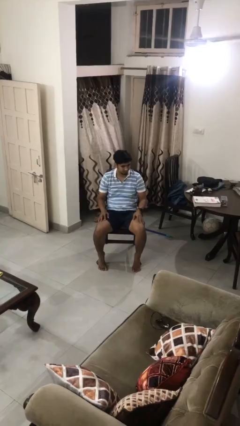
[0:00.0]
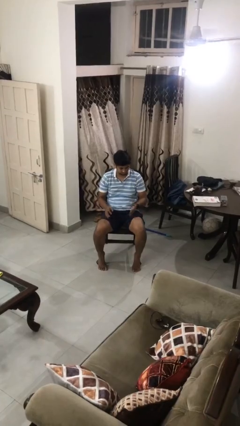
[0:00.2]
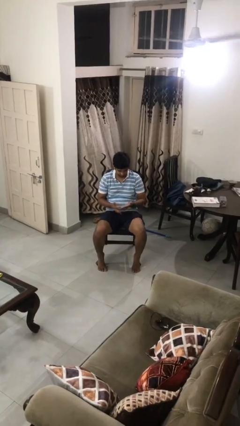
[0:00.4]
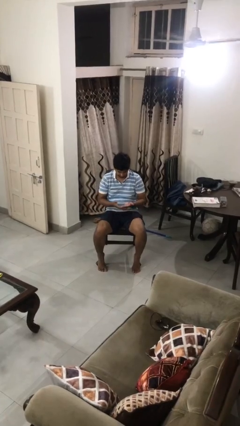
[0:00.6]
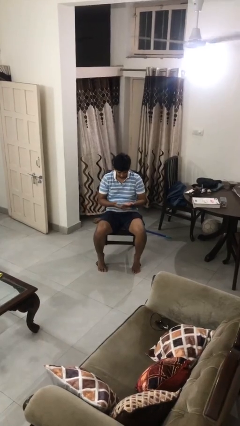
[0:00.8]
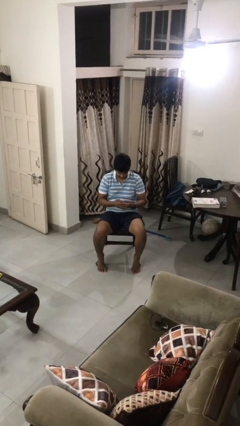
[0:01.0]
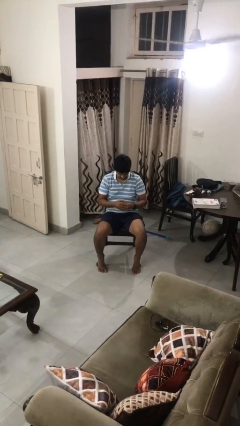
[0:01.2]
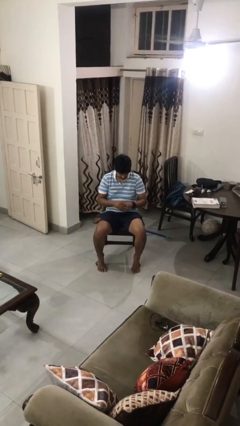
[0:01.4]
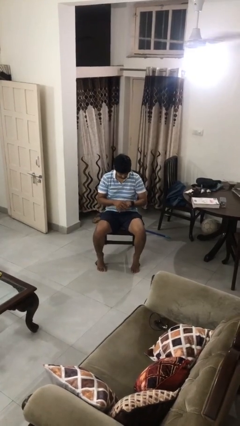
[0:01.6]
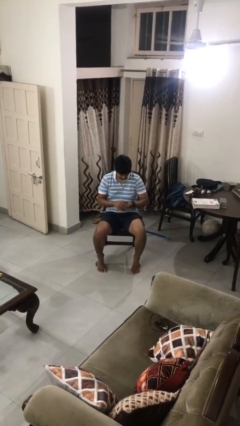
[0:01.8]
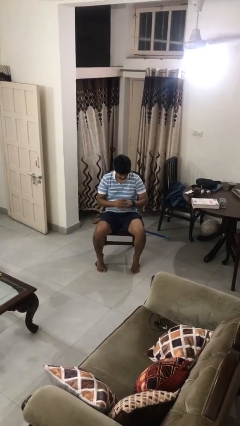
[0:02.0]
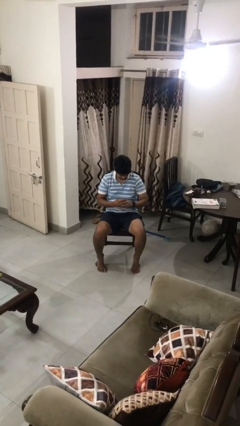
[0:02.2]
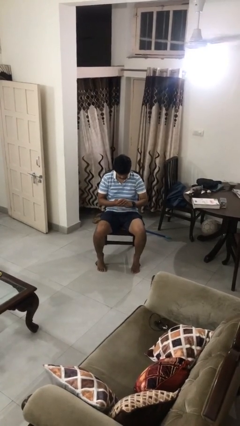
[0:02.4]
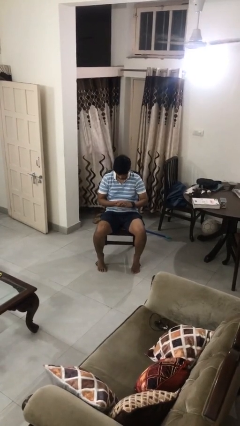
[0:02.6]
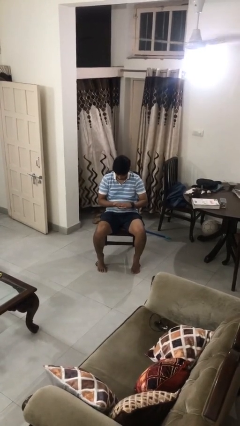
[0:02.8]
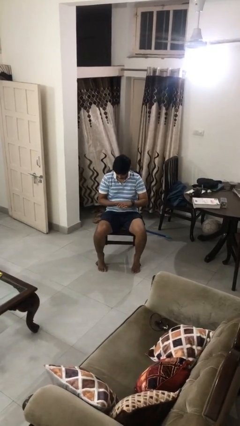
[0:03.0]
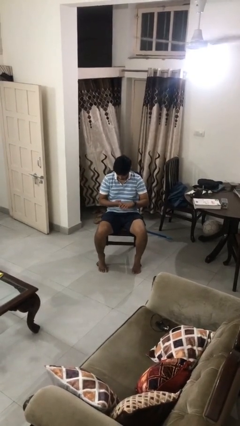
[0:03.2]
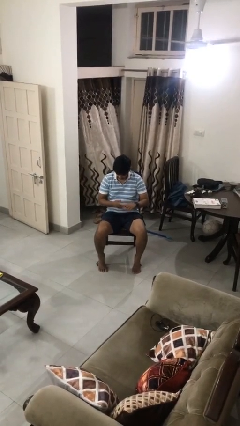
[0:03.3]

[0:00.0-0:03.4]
person looks at hands in lap

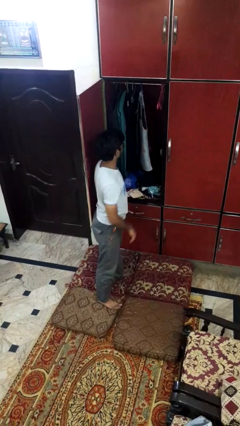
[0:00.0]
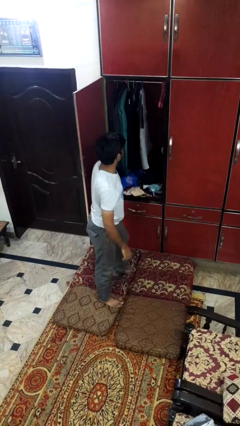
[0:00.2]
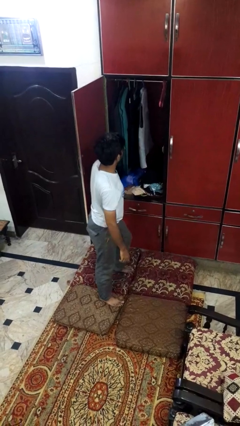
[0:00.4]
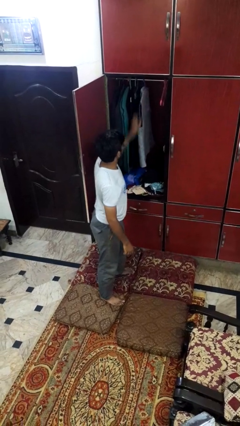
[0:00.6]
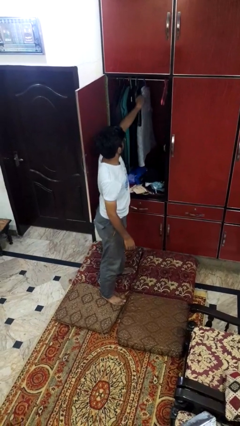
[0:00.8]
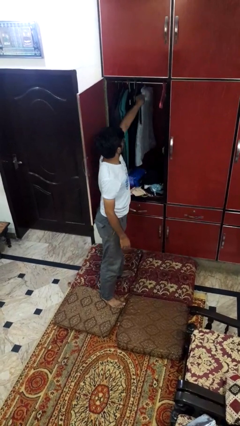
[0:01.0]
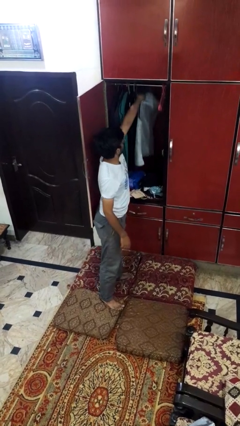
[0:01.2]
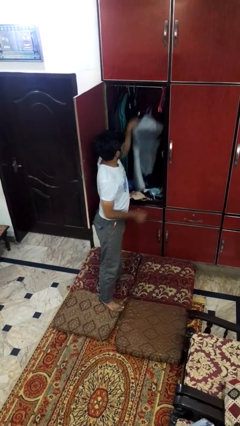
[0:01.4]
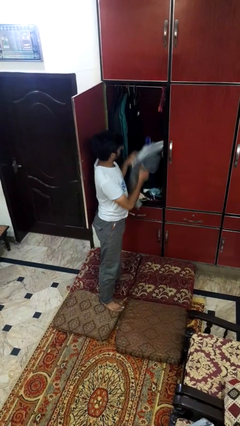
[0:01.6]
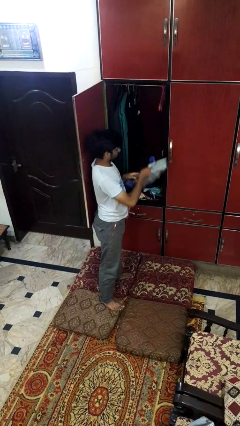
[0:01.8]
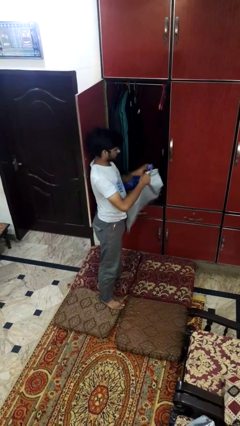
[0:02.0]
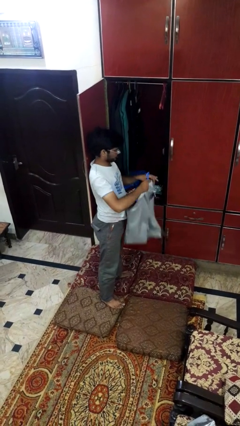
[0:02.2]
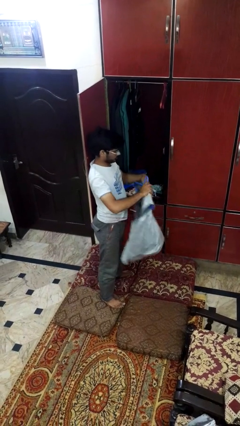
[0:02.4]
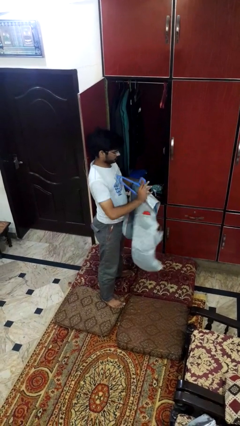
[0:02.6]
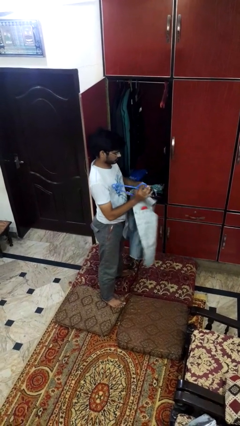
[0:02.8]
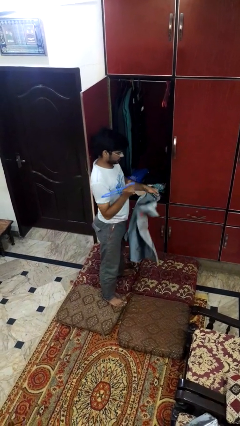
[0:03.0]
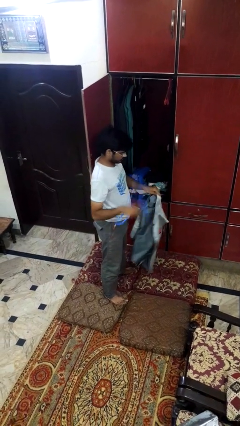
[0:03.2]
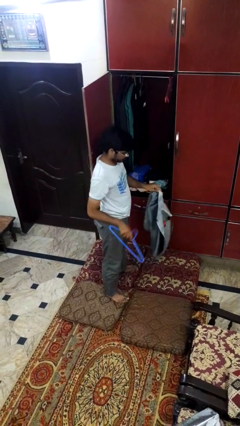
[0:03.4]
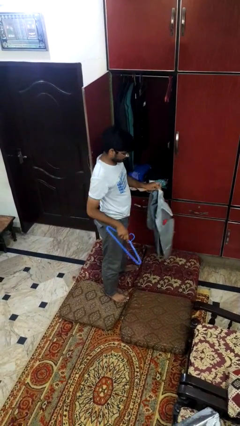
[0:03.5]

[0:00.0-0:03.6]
person takes clothes from closet

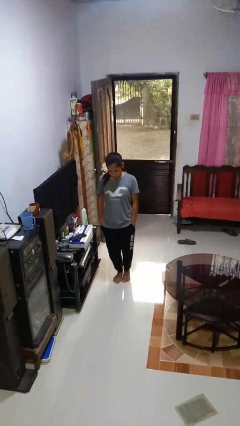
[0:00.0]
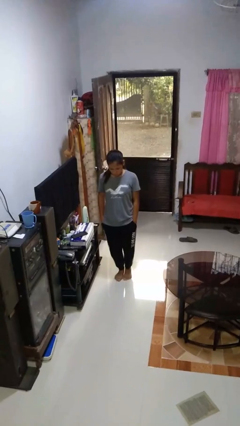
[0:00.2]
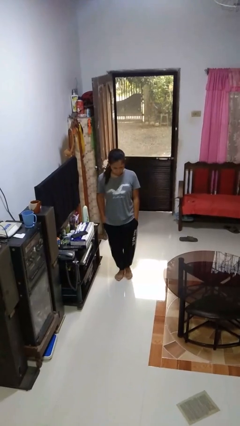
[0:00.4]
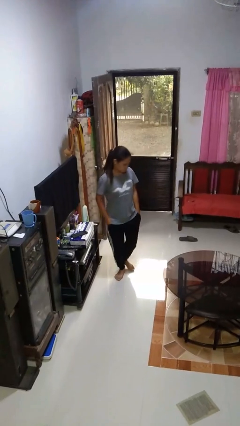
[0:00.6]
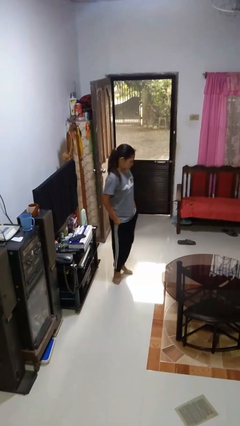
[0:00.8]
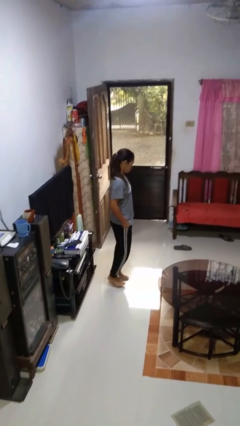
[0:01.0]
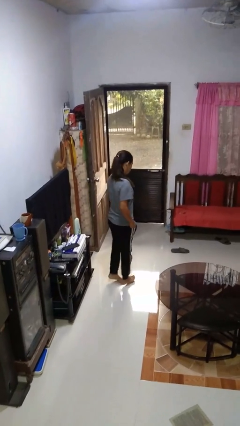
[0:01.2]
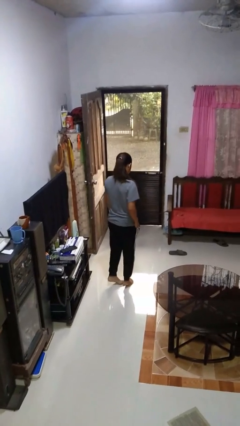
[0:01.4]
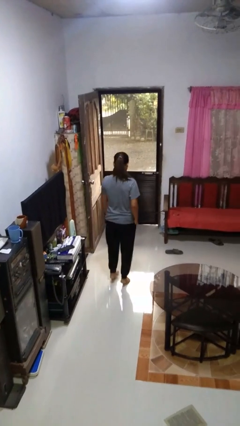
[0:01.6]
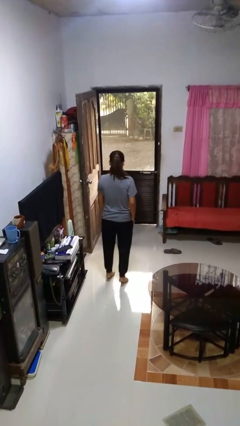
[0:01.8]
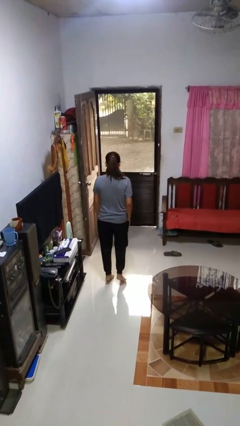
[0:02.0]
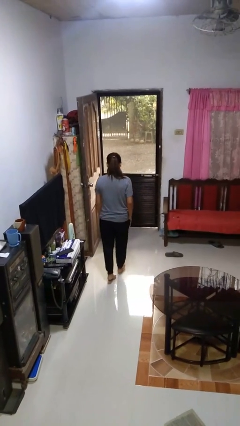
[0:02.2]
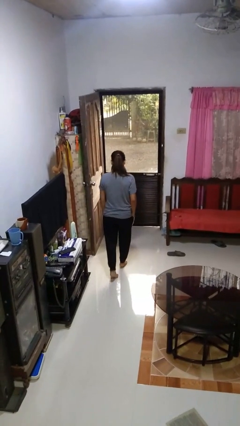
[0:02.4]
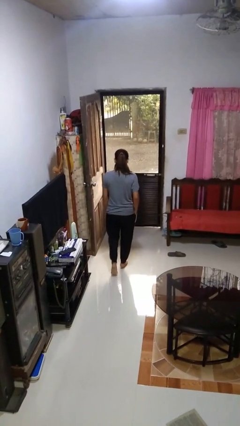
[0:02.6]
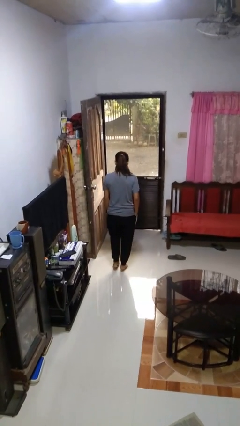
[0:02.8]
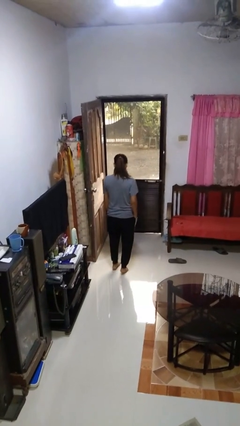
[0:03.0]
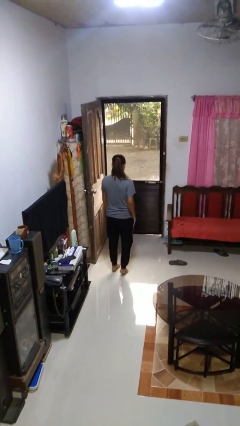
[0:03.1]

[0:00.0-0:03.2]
person walks tiptoe

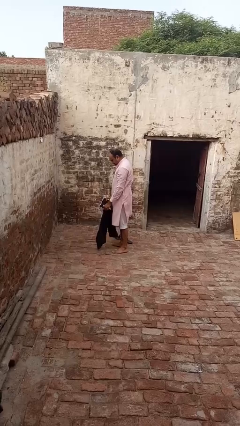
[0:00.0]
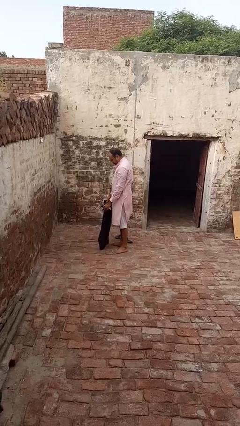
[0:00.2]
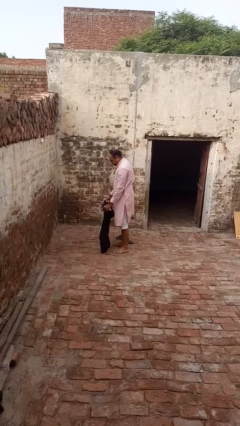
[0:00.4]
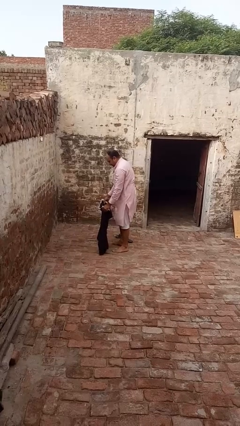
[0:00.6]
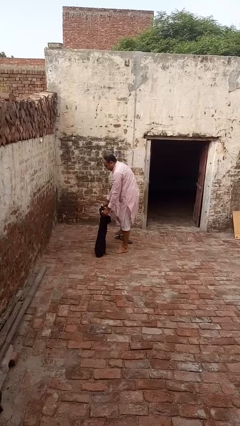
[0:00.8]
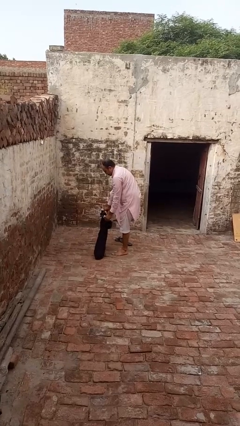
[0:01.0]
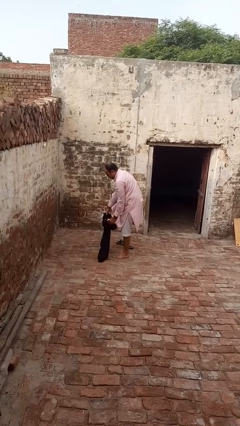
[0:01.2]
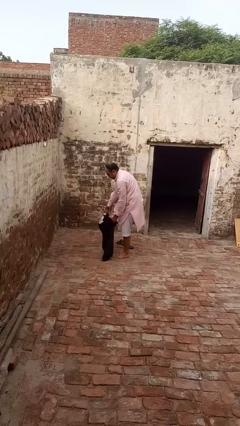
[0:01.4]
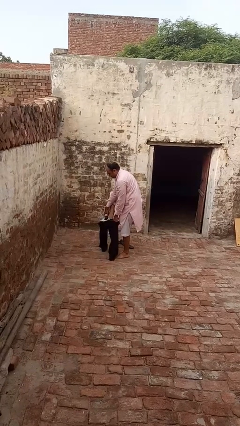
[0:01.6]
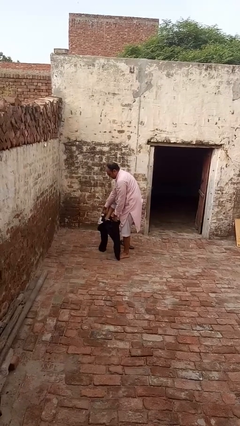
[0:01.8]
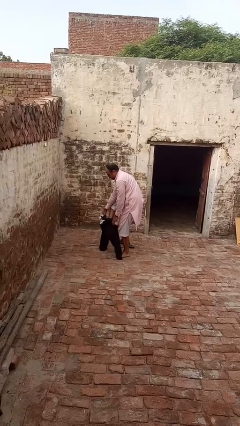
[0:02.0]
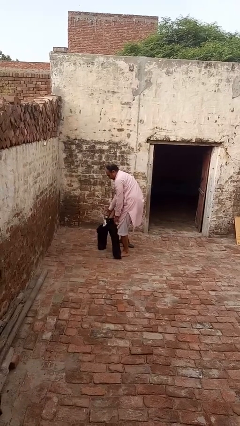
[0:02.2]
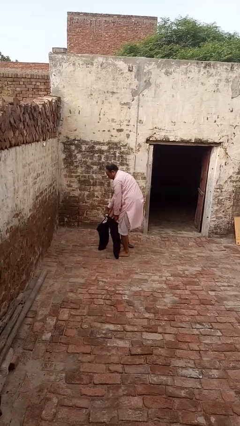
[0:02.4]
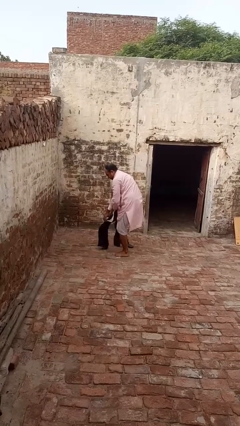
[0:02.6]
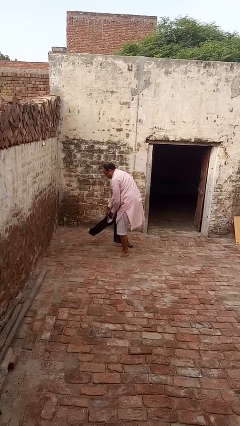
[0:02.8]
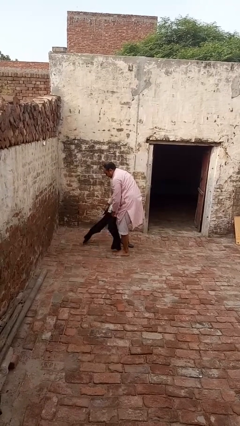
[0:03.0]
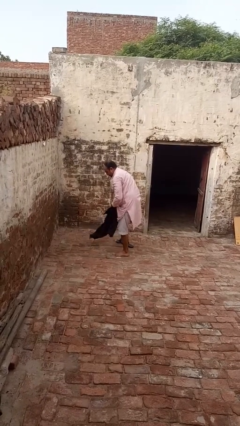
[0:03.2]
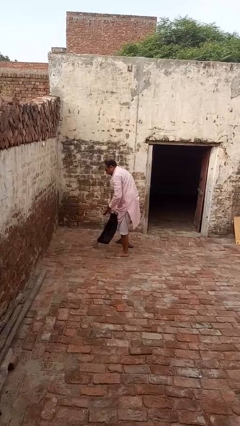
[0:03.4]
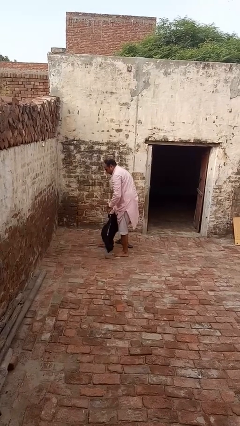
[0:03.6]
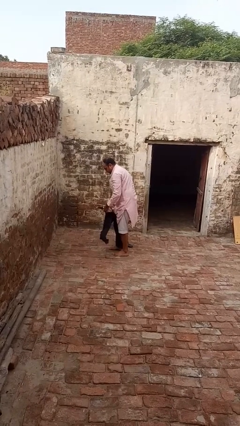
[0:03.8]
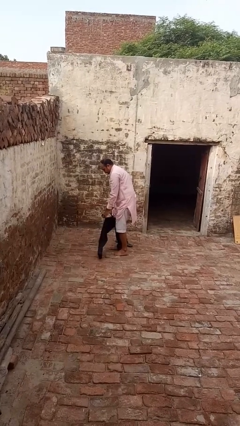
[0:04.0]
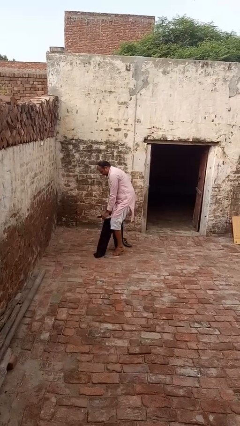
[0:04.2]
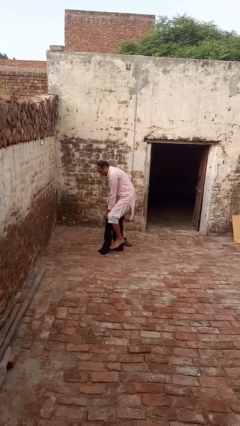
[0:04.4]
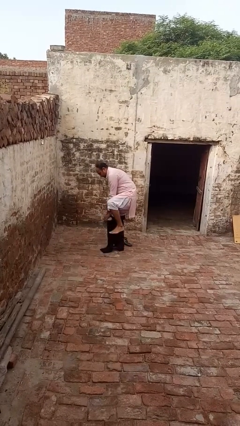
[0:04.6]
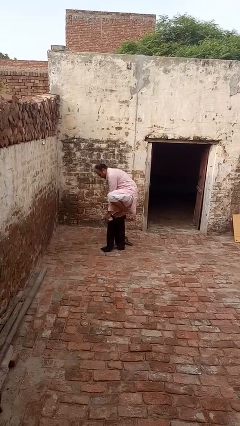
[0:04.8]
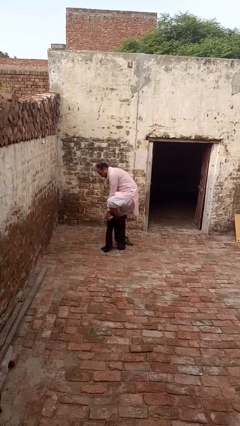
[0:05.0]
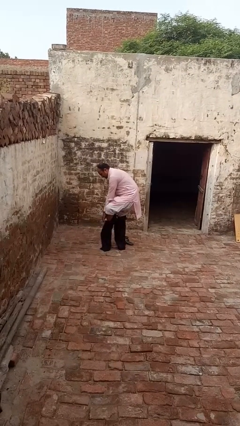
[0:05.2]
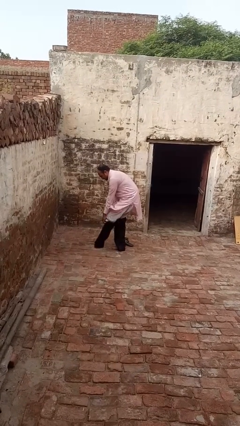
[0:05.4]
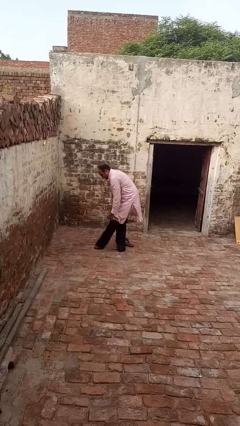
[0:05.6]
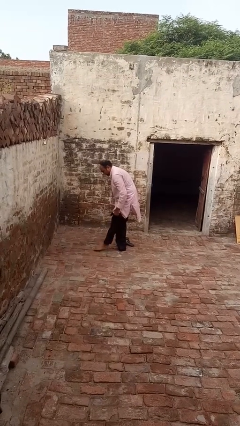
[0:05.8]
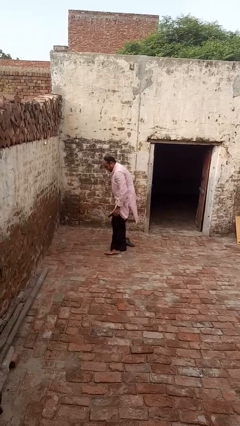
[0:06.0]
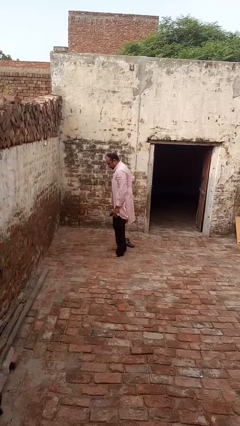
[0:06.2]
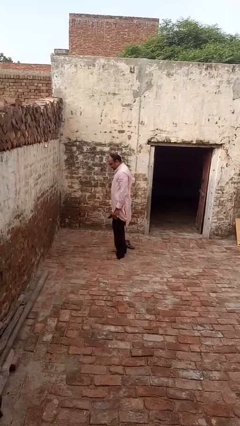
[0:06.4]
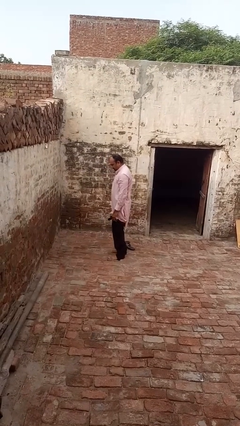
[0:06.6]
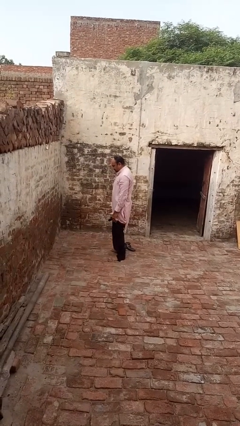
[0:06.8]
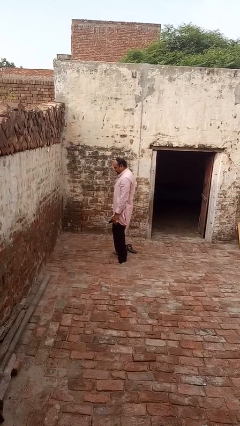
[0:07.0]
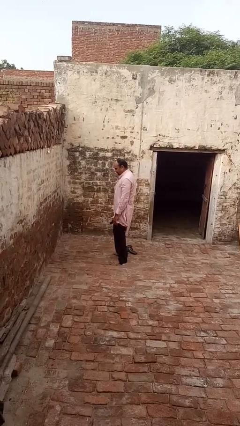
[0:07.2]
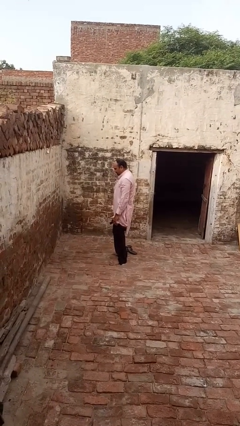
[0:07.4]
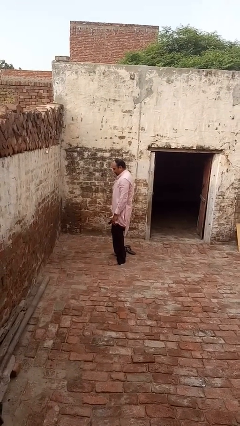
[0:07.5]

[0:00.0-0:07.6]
person puts on pants
